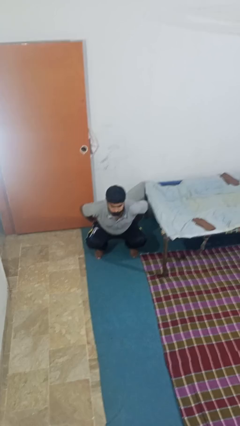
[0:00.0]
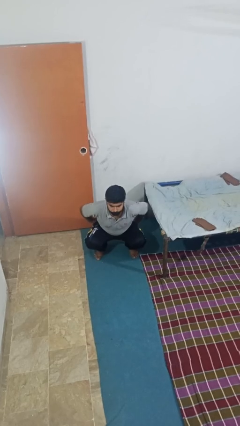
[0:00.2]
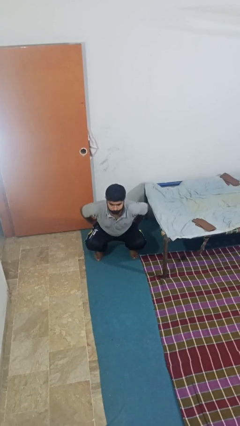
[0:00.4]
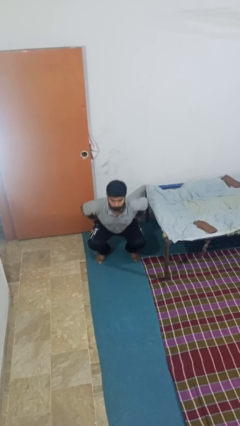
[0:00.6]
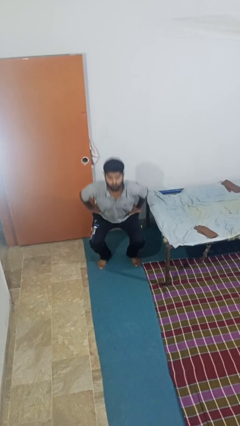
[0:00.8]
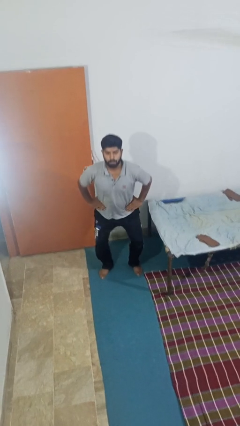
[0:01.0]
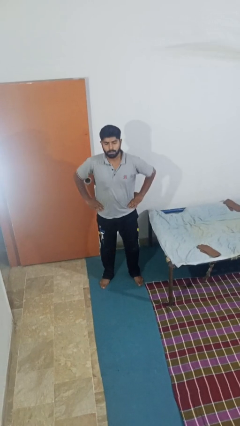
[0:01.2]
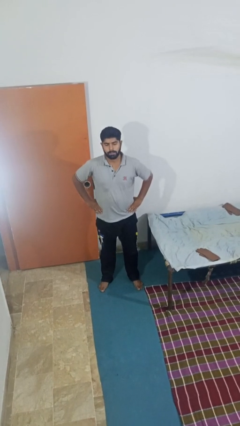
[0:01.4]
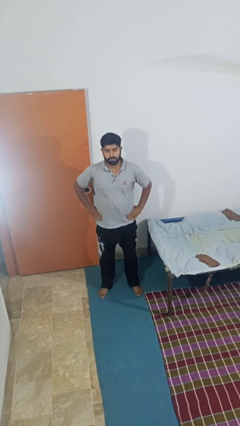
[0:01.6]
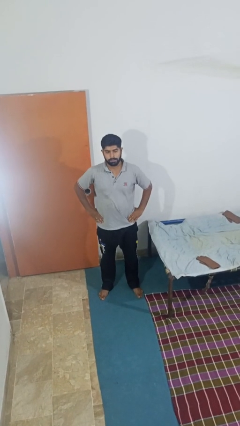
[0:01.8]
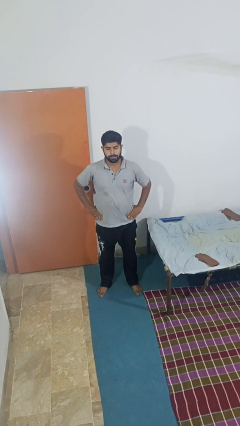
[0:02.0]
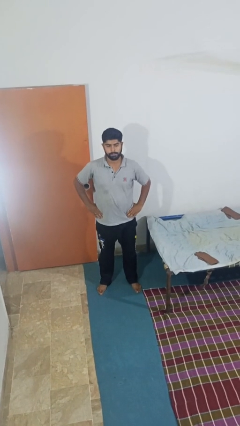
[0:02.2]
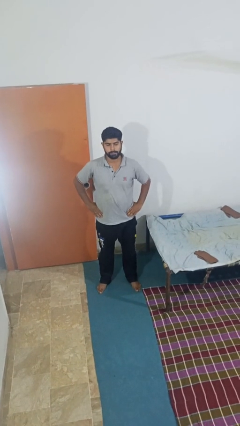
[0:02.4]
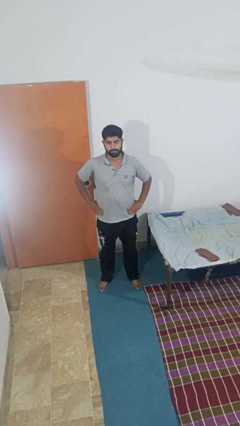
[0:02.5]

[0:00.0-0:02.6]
person stands up

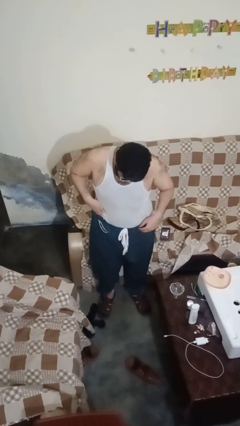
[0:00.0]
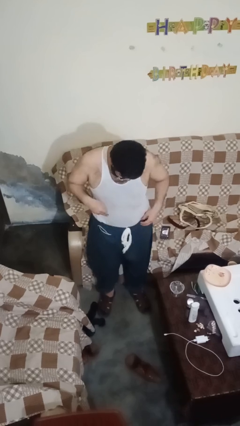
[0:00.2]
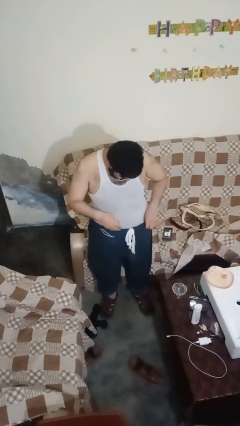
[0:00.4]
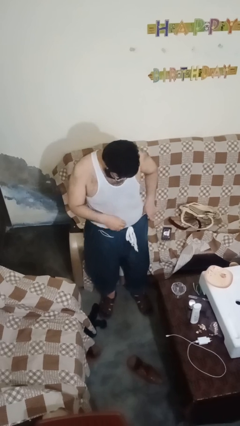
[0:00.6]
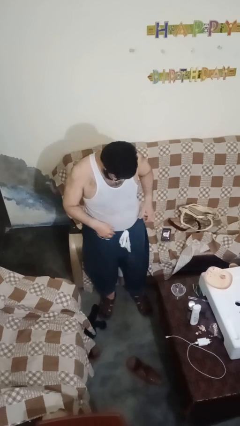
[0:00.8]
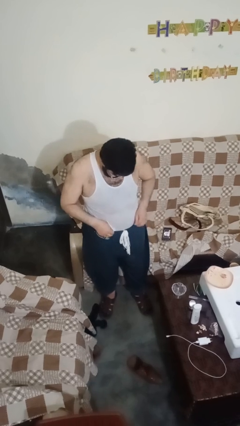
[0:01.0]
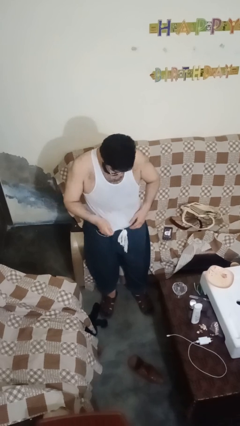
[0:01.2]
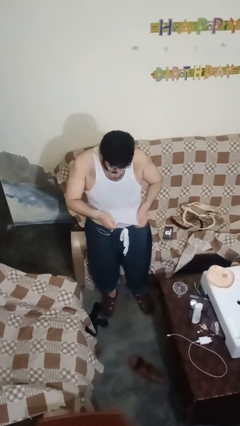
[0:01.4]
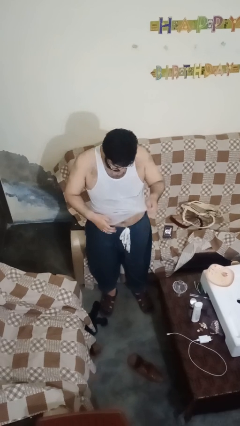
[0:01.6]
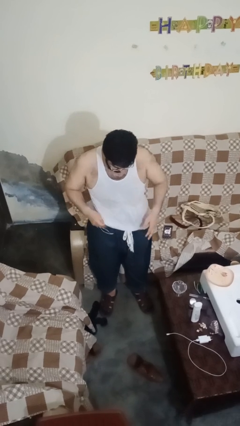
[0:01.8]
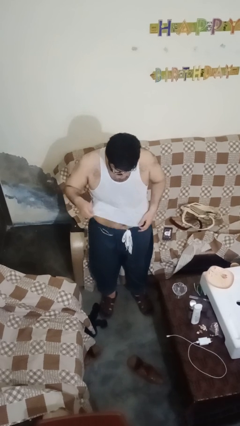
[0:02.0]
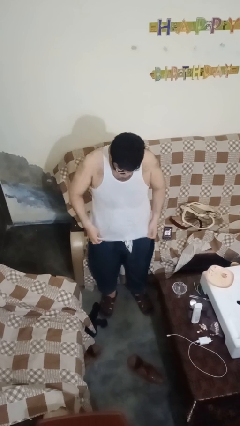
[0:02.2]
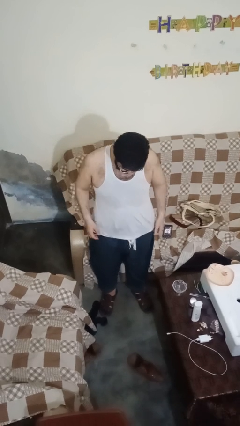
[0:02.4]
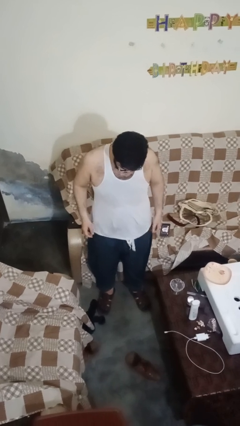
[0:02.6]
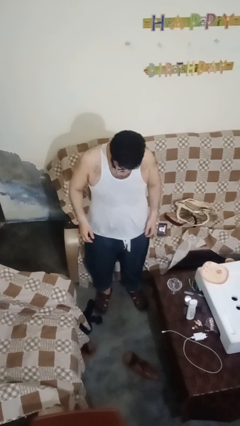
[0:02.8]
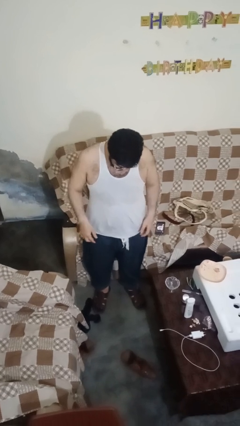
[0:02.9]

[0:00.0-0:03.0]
person untucks shirt

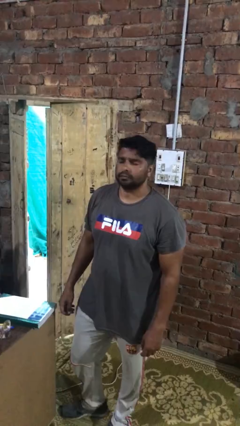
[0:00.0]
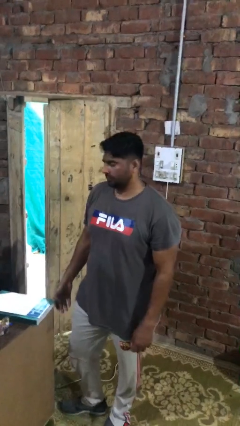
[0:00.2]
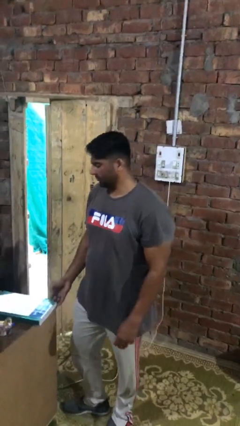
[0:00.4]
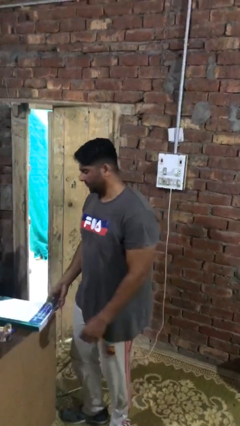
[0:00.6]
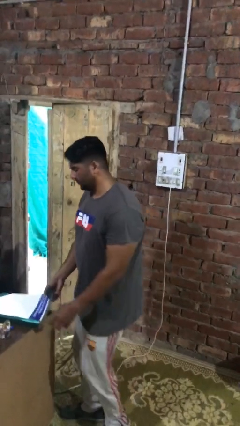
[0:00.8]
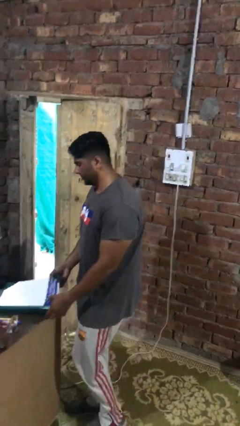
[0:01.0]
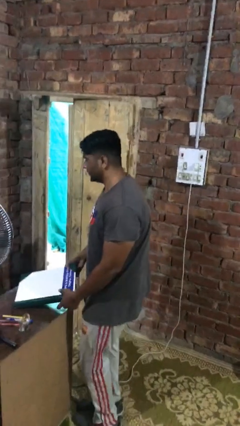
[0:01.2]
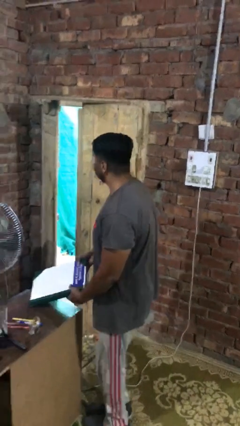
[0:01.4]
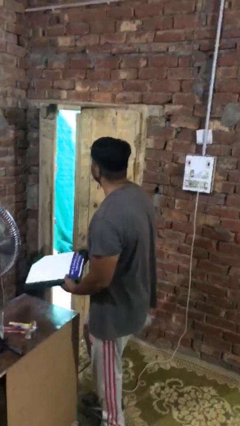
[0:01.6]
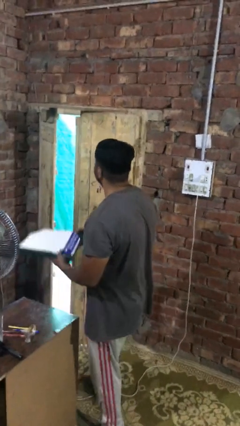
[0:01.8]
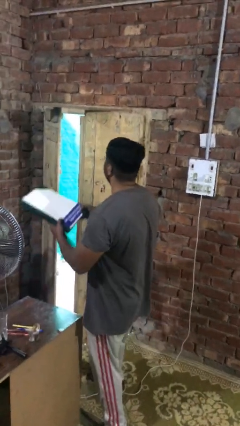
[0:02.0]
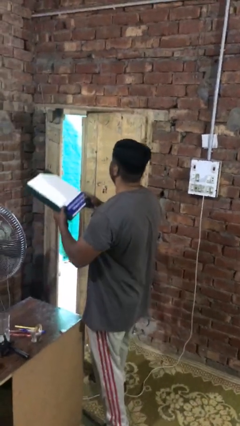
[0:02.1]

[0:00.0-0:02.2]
person picks up object from table

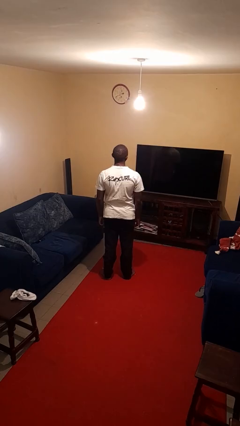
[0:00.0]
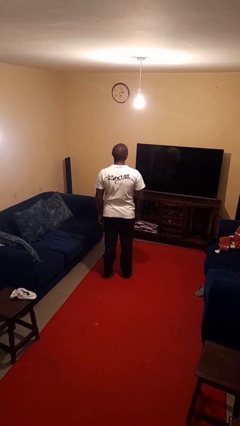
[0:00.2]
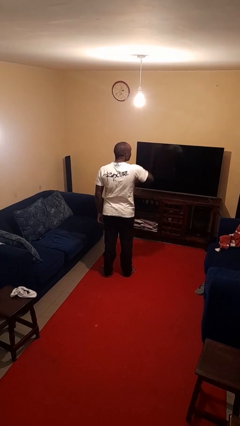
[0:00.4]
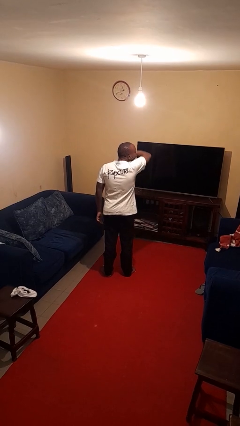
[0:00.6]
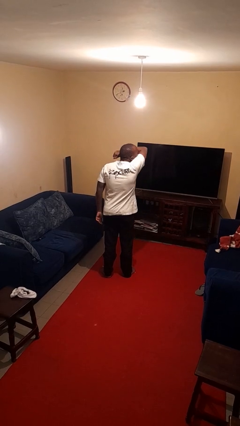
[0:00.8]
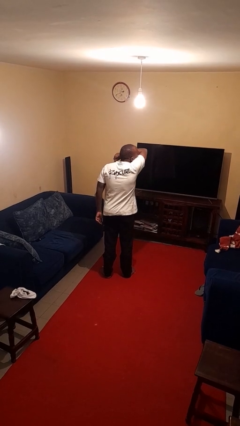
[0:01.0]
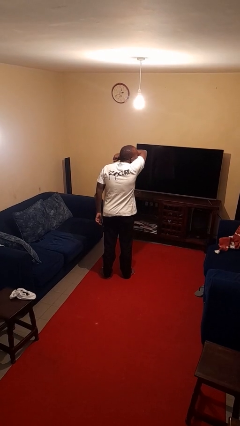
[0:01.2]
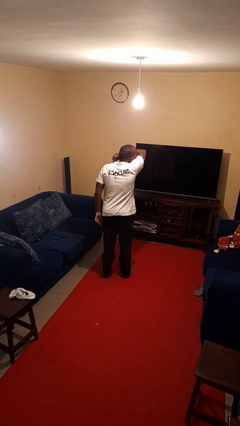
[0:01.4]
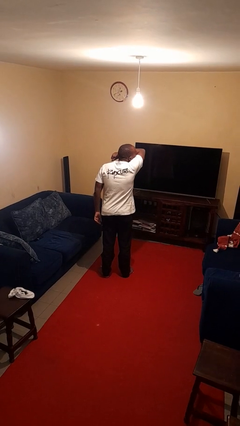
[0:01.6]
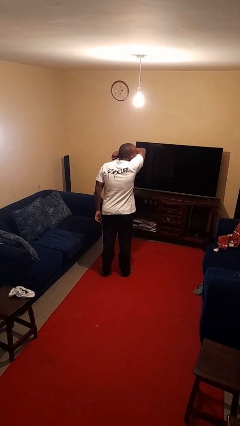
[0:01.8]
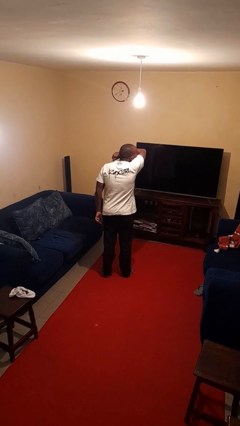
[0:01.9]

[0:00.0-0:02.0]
person sneezes into arm

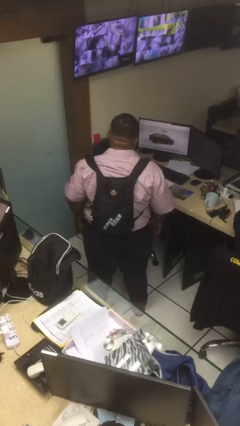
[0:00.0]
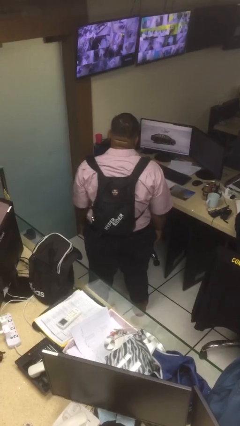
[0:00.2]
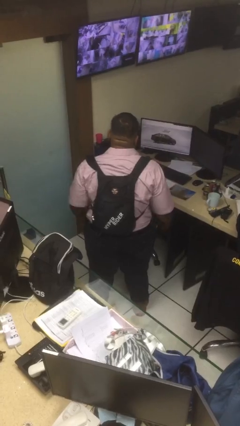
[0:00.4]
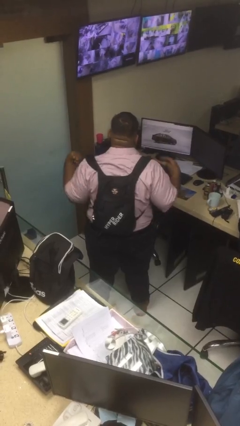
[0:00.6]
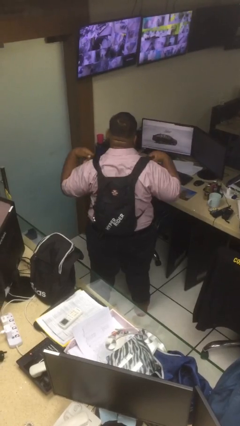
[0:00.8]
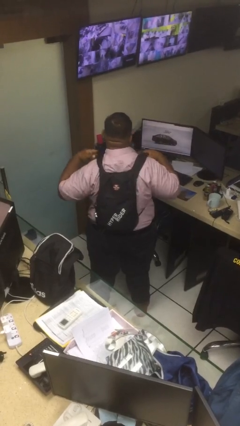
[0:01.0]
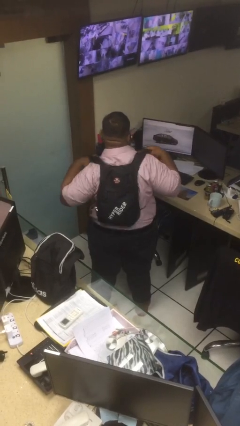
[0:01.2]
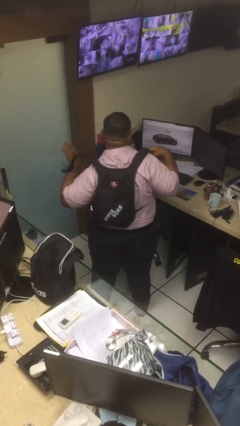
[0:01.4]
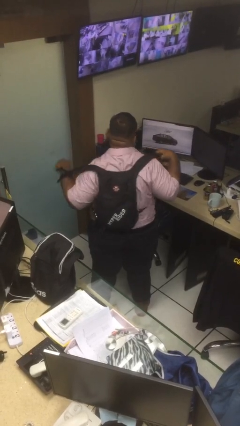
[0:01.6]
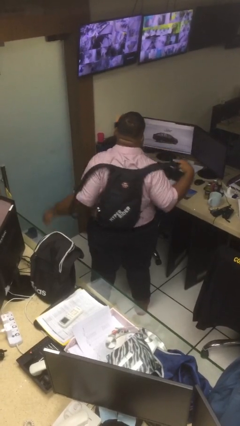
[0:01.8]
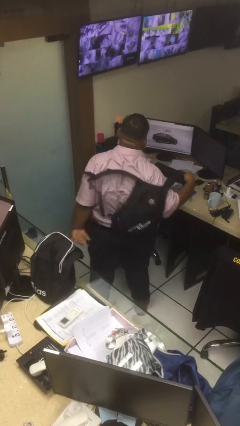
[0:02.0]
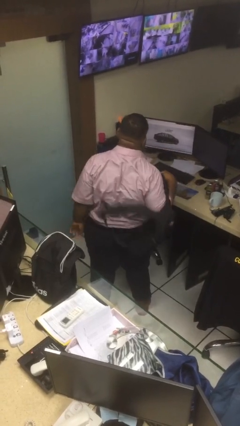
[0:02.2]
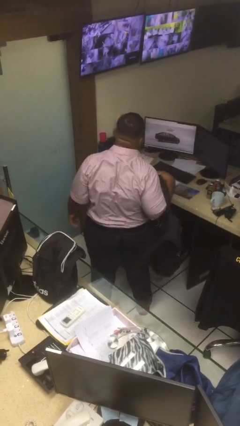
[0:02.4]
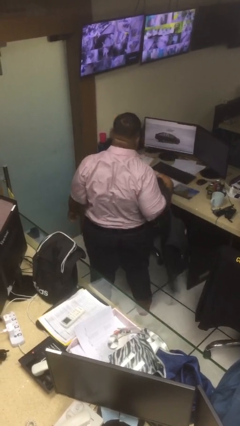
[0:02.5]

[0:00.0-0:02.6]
person takes off backpack

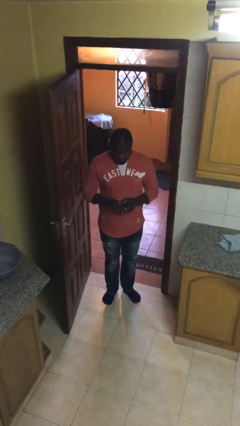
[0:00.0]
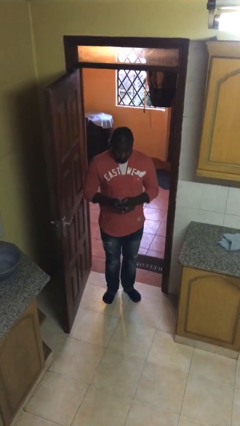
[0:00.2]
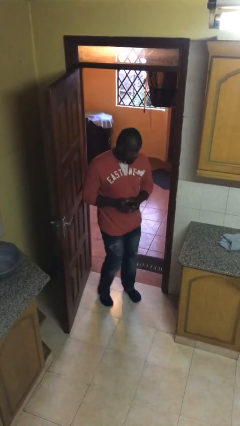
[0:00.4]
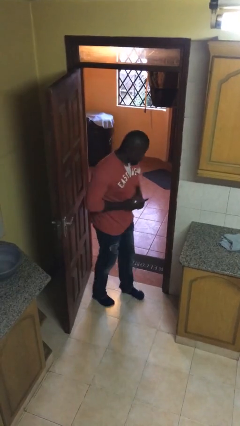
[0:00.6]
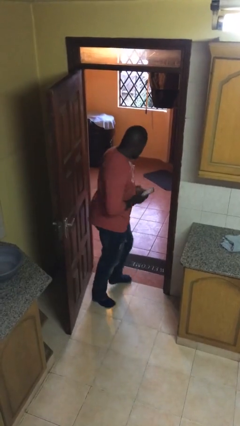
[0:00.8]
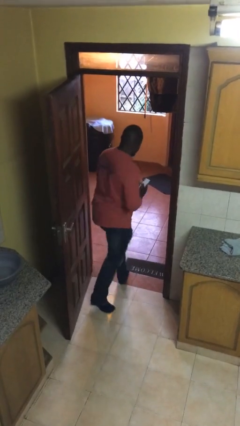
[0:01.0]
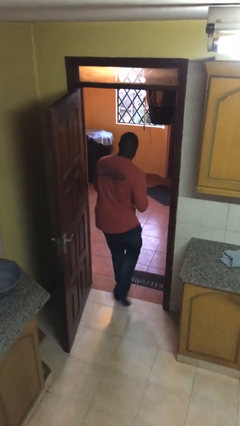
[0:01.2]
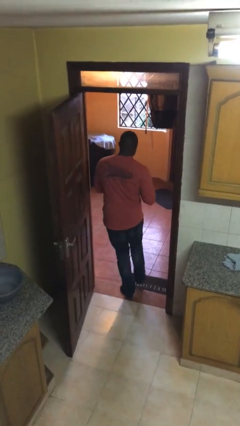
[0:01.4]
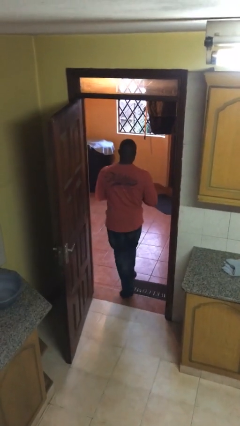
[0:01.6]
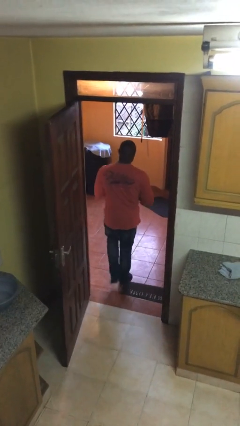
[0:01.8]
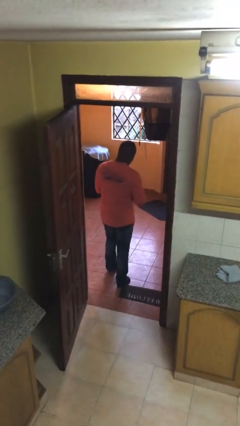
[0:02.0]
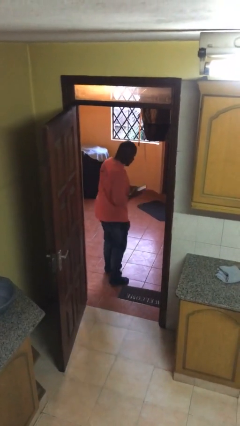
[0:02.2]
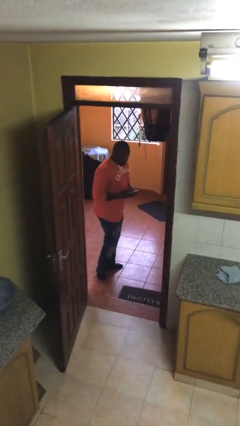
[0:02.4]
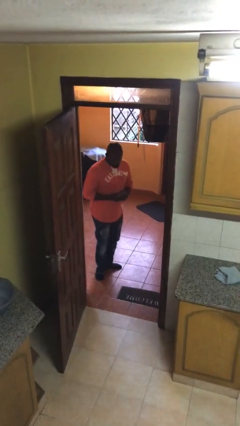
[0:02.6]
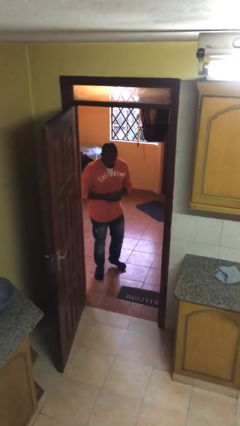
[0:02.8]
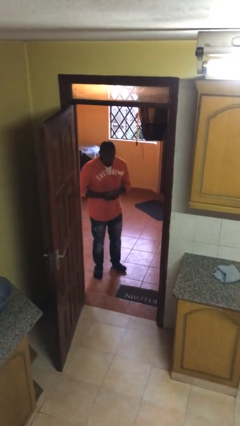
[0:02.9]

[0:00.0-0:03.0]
person exits scene through structure

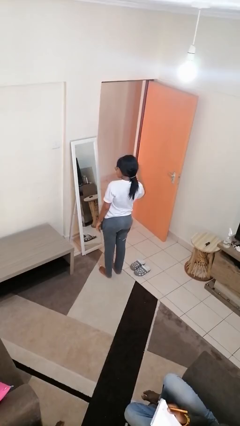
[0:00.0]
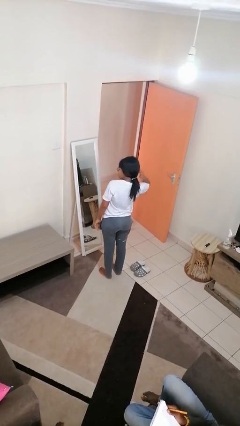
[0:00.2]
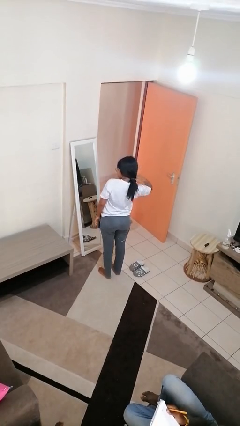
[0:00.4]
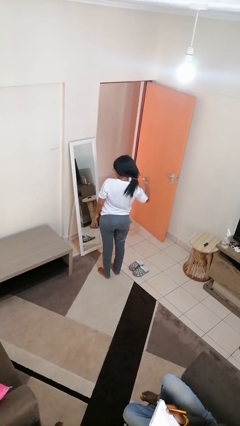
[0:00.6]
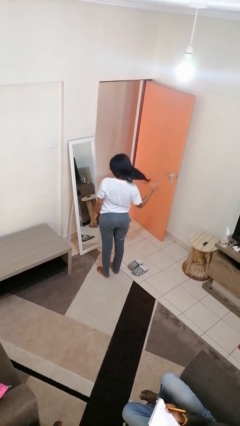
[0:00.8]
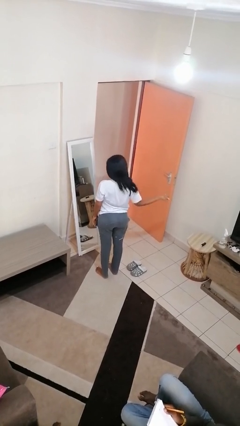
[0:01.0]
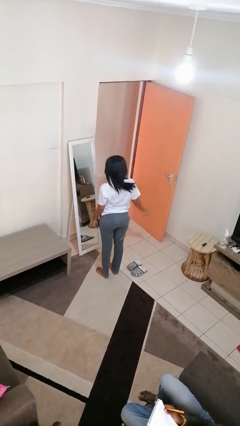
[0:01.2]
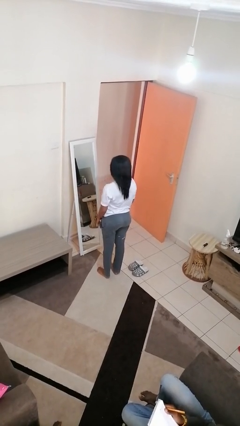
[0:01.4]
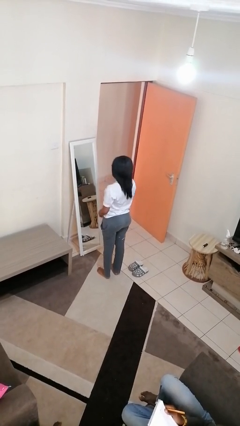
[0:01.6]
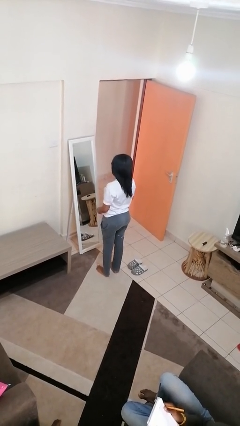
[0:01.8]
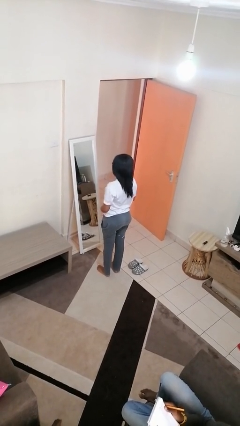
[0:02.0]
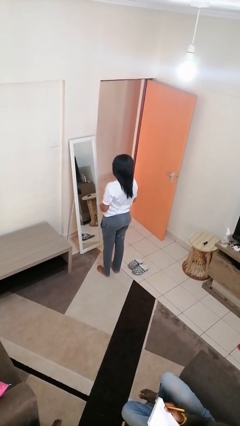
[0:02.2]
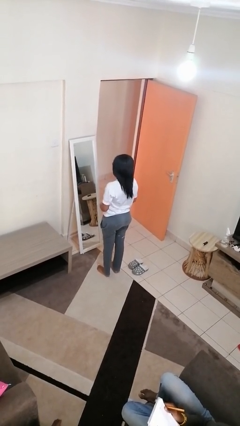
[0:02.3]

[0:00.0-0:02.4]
person takes off hairtie
